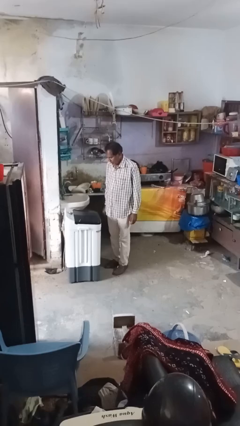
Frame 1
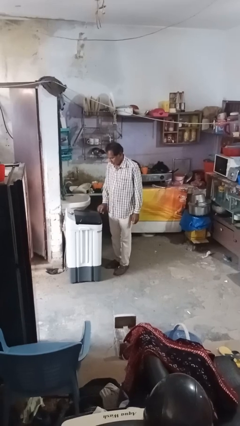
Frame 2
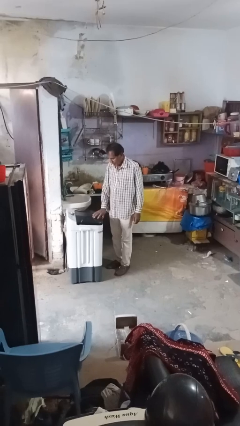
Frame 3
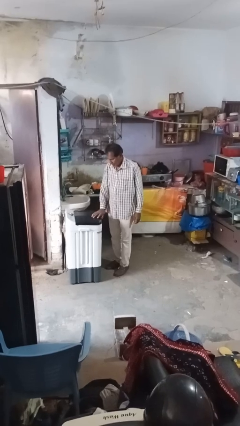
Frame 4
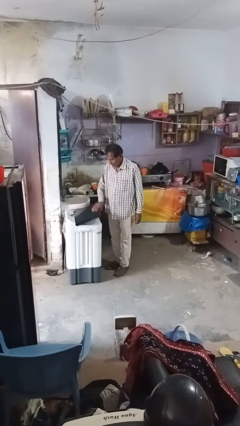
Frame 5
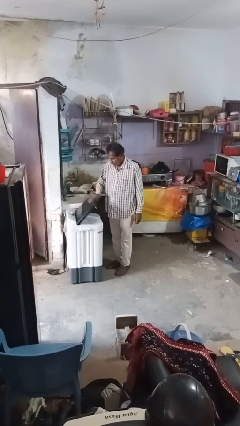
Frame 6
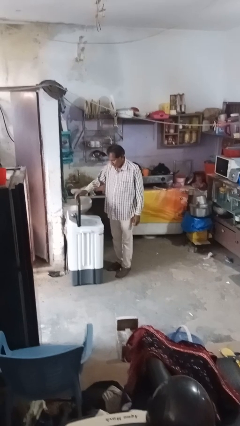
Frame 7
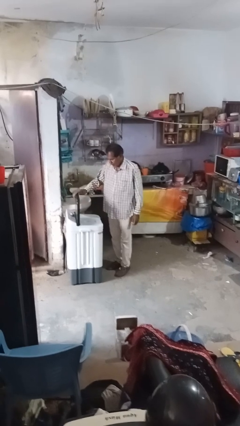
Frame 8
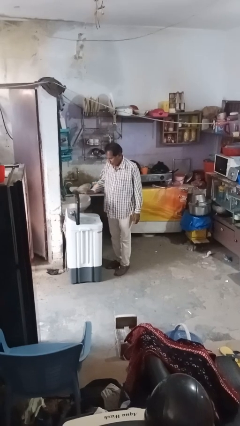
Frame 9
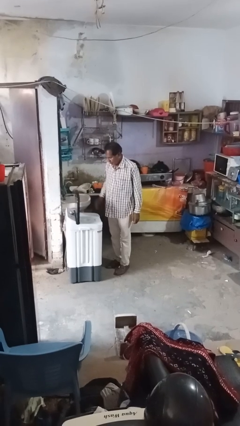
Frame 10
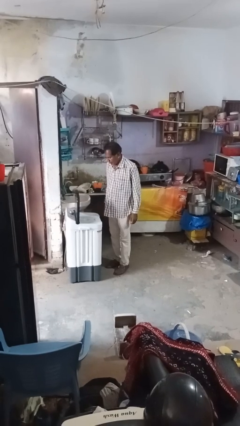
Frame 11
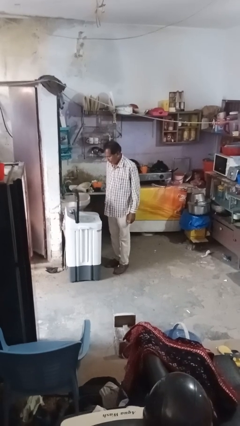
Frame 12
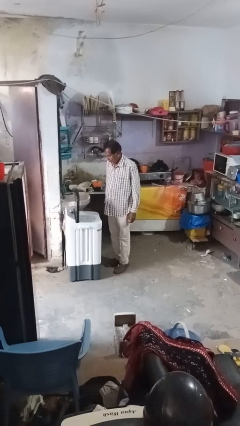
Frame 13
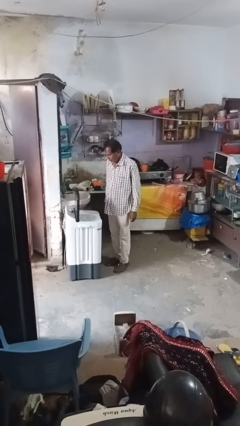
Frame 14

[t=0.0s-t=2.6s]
person opens clothes washer

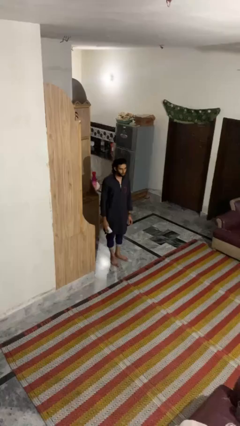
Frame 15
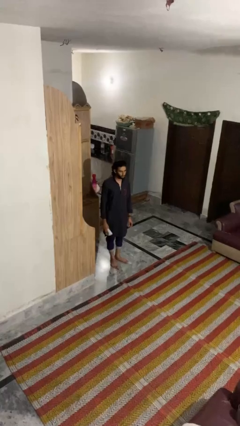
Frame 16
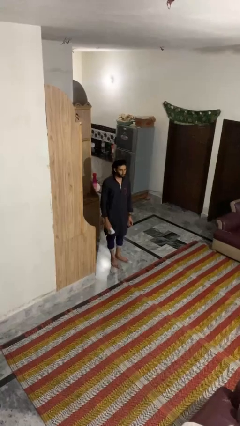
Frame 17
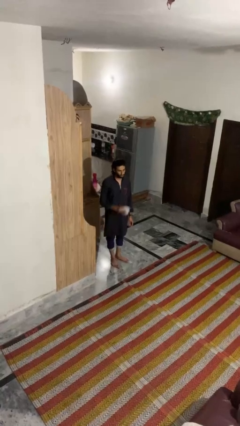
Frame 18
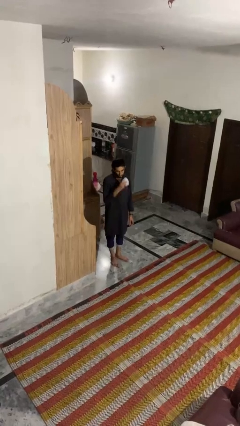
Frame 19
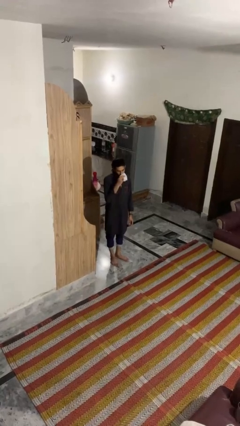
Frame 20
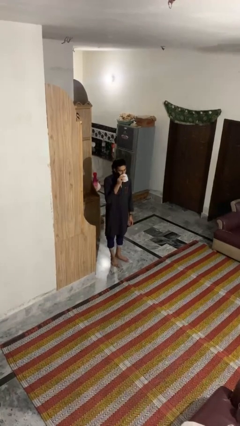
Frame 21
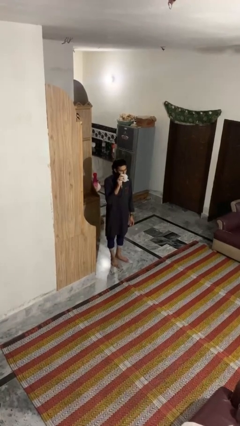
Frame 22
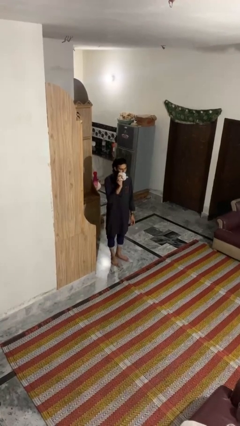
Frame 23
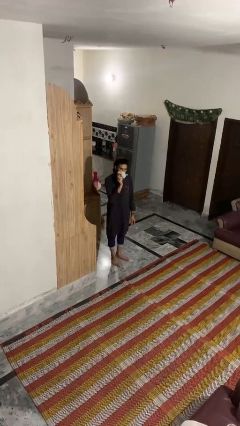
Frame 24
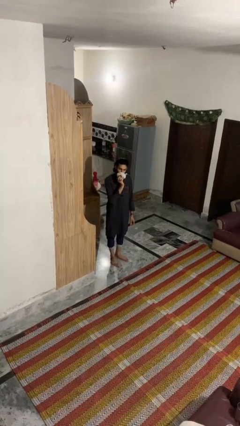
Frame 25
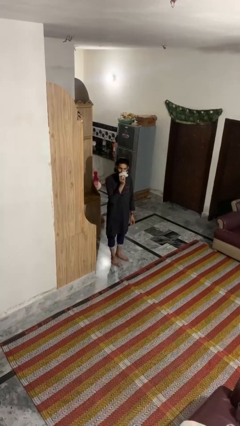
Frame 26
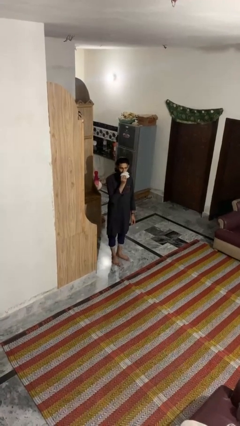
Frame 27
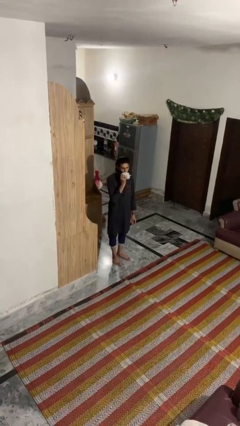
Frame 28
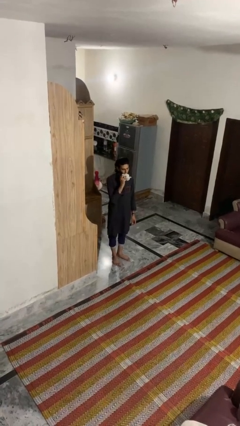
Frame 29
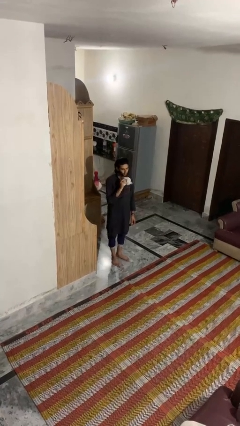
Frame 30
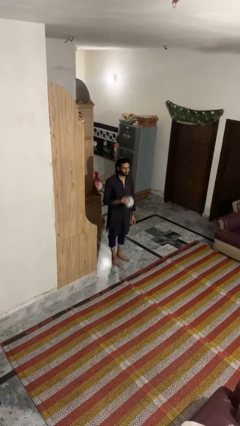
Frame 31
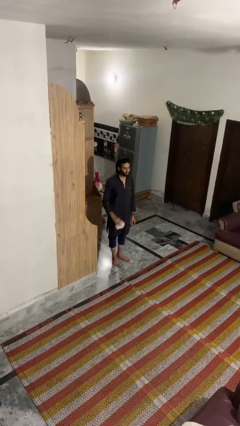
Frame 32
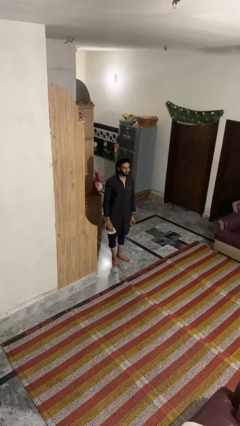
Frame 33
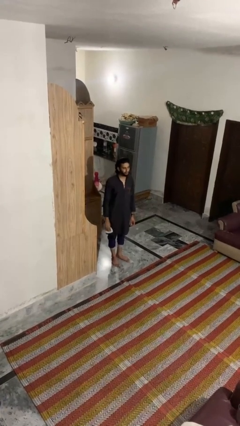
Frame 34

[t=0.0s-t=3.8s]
person wipes mouth with napkin

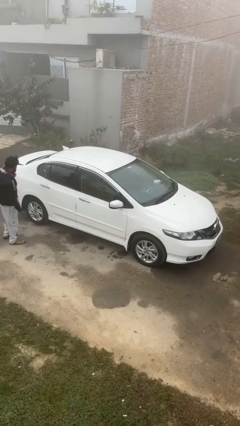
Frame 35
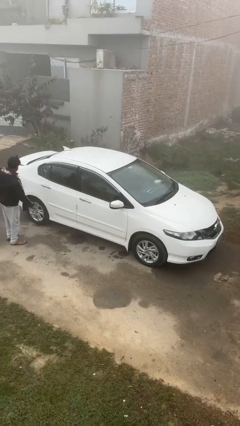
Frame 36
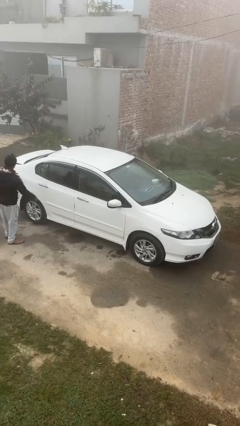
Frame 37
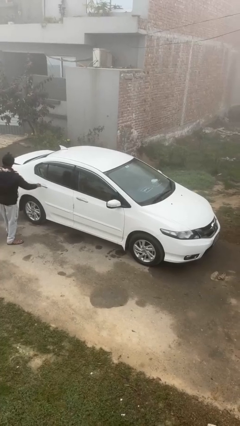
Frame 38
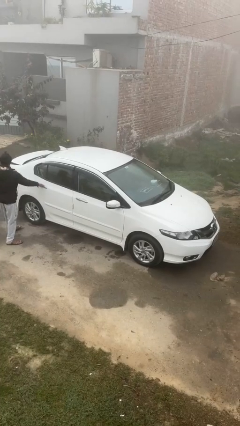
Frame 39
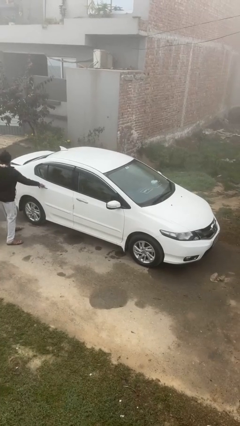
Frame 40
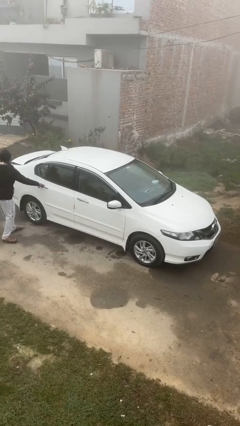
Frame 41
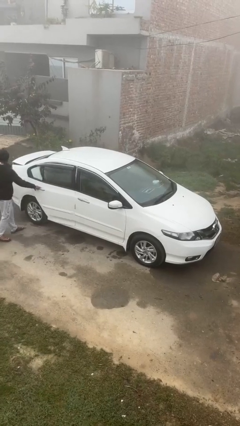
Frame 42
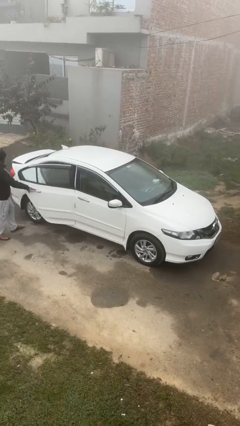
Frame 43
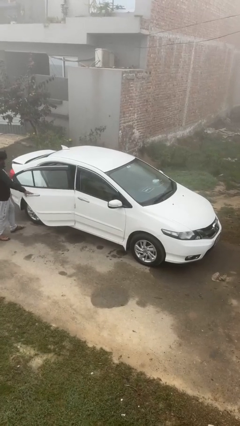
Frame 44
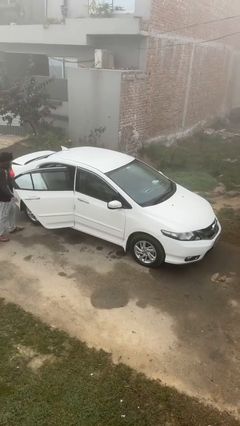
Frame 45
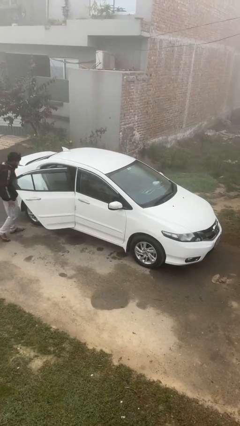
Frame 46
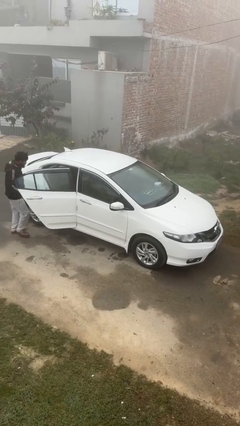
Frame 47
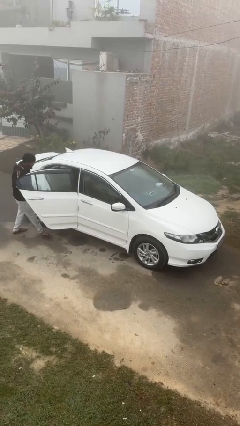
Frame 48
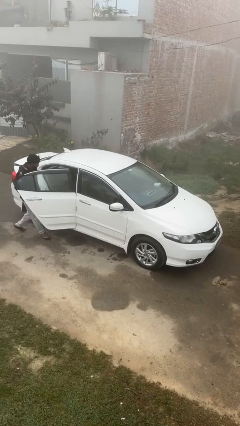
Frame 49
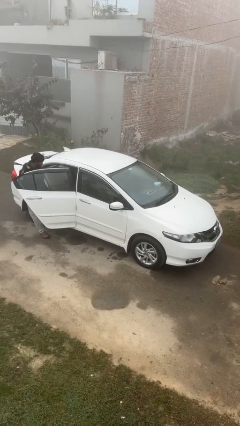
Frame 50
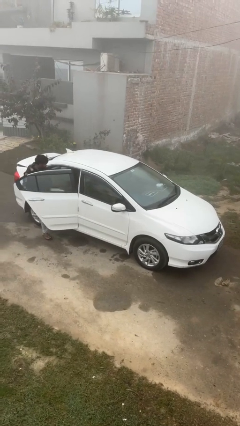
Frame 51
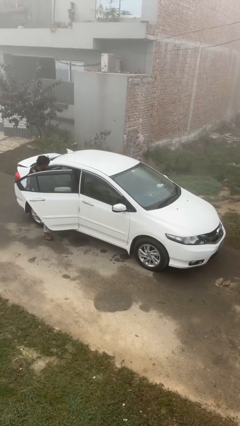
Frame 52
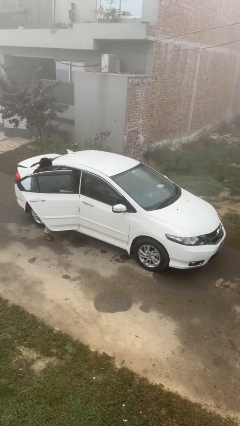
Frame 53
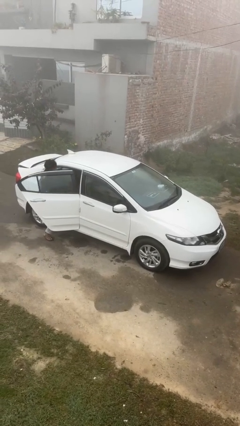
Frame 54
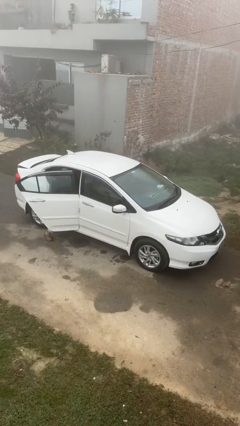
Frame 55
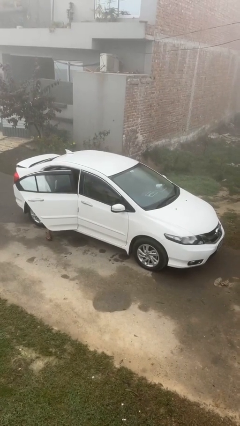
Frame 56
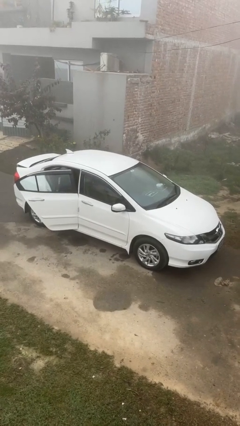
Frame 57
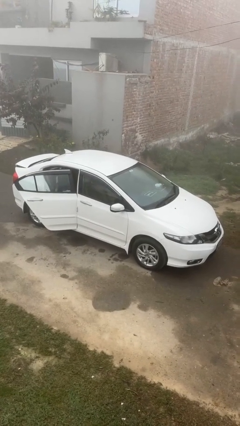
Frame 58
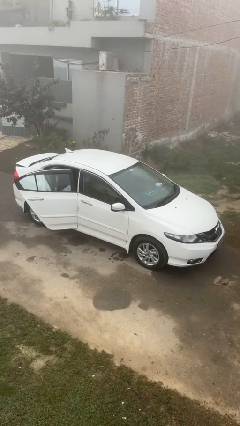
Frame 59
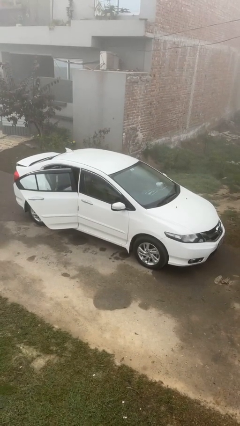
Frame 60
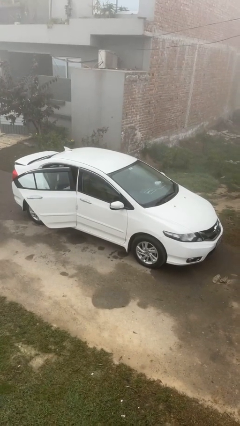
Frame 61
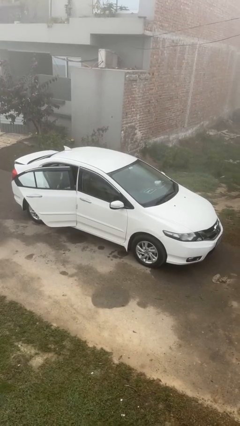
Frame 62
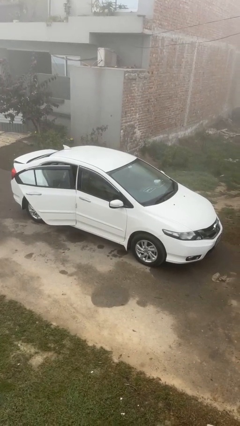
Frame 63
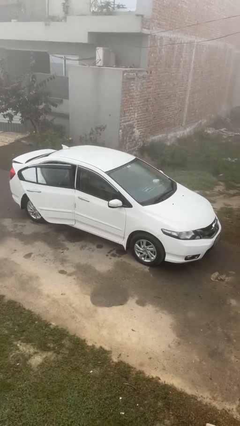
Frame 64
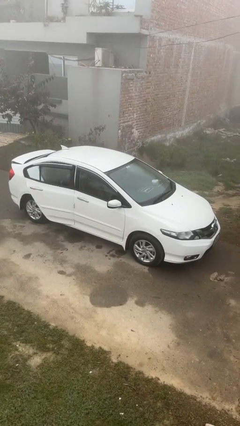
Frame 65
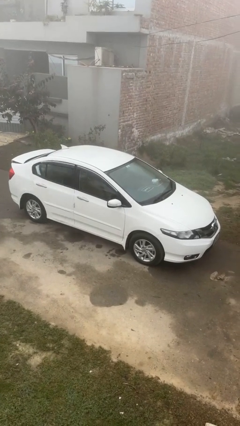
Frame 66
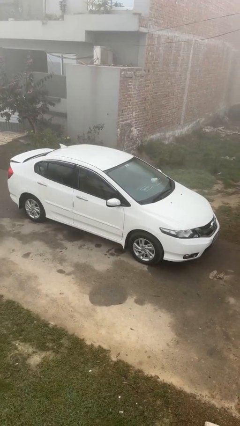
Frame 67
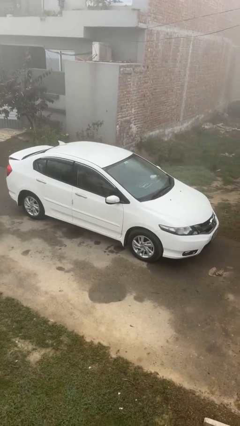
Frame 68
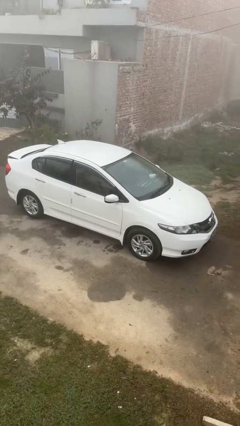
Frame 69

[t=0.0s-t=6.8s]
car picks up person

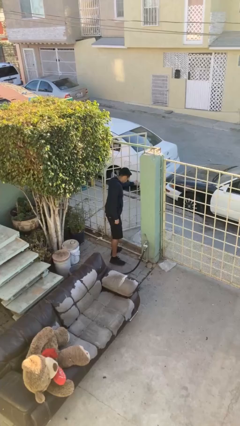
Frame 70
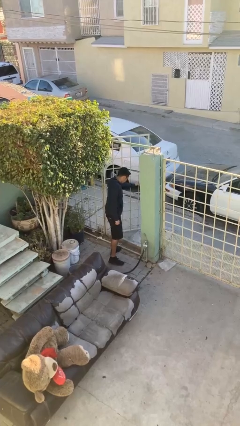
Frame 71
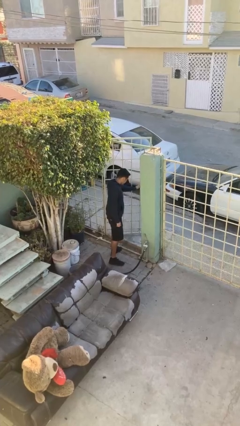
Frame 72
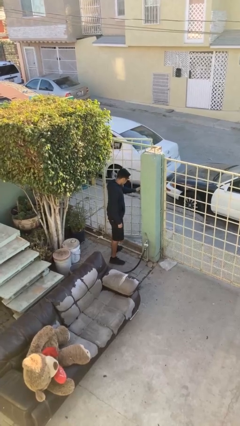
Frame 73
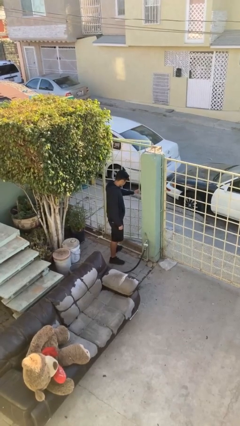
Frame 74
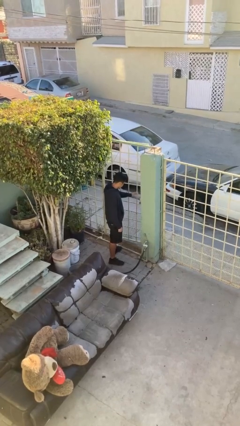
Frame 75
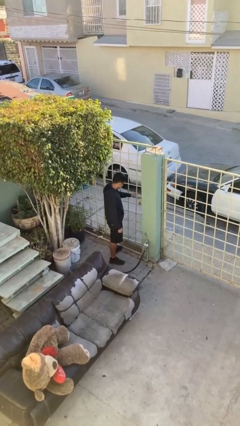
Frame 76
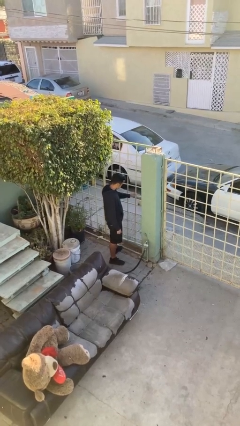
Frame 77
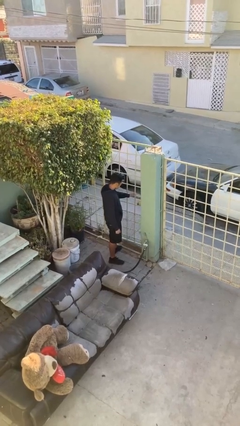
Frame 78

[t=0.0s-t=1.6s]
person closes facility door

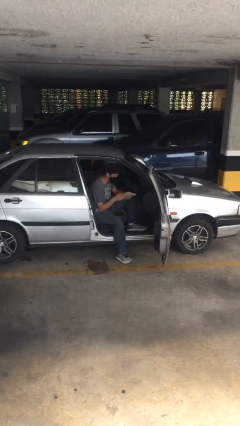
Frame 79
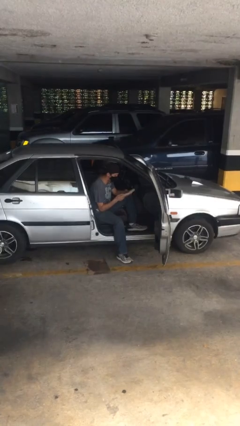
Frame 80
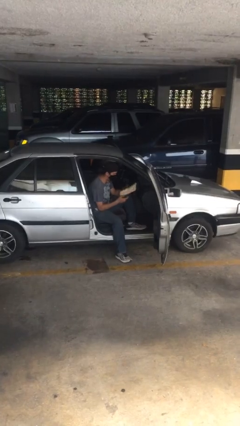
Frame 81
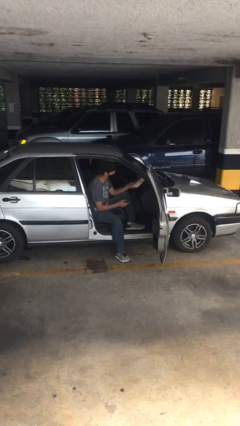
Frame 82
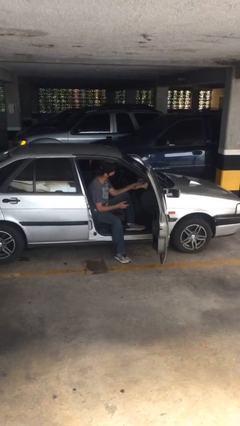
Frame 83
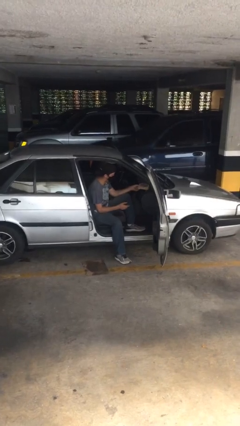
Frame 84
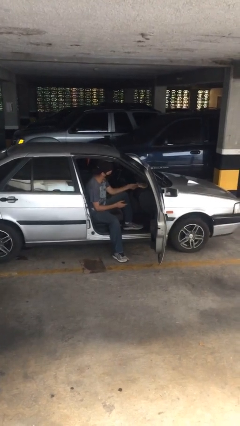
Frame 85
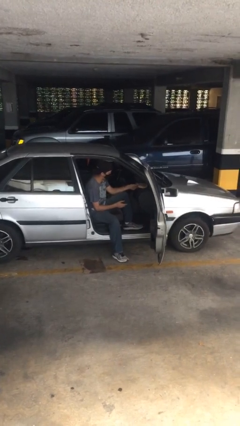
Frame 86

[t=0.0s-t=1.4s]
person puts down object on table

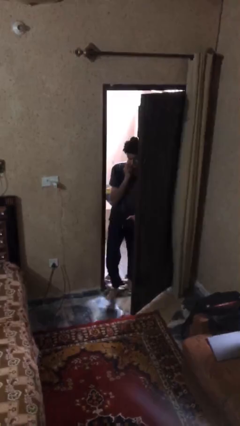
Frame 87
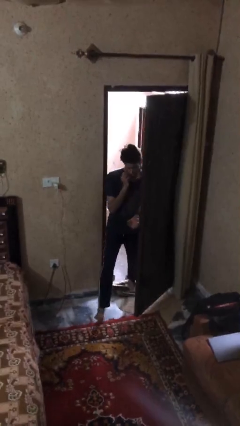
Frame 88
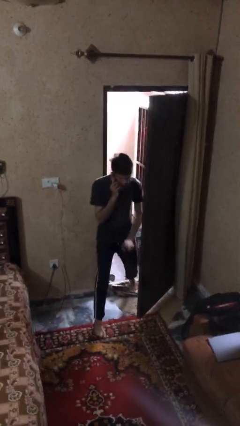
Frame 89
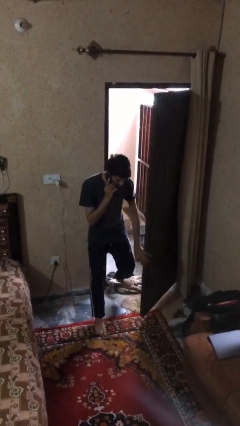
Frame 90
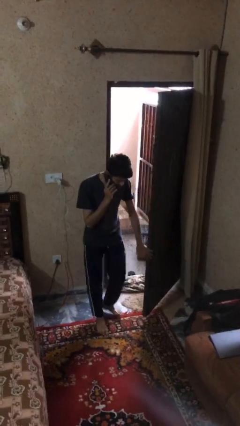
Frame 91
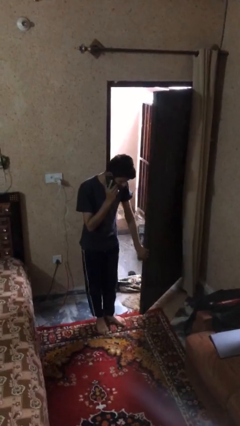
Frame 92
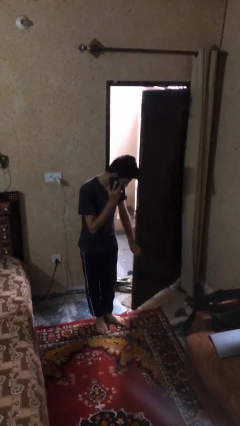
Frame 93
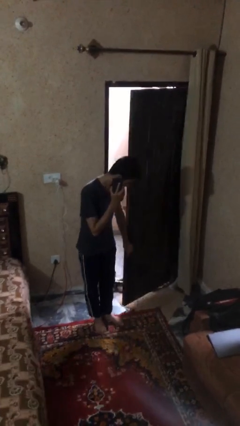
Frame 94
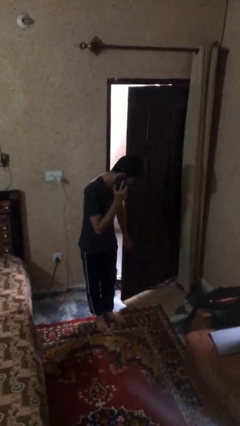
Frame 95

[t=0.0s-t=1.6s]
person enters scene through structure
